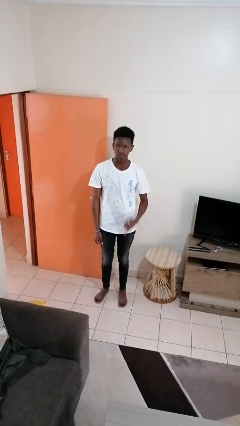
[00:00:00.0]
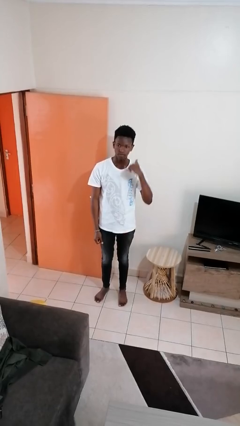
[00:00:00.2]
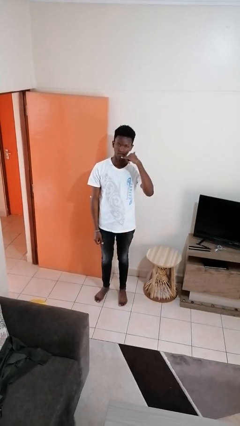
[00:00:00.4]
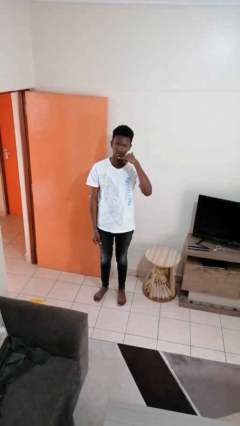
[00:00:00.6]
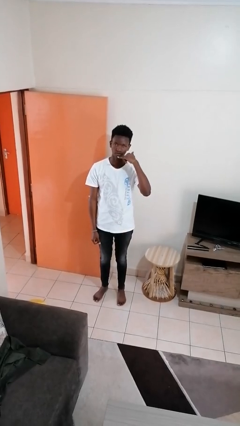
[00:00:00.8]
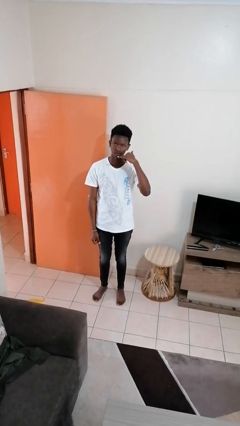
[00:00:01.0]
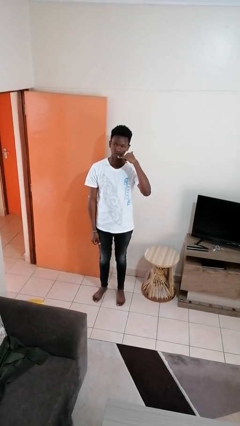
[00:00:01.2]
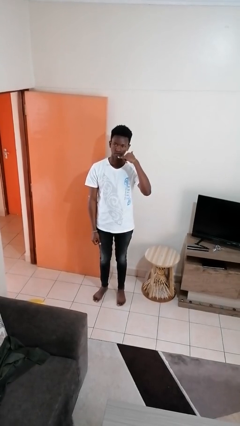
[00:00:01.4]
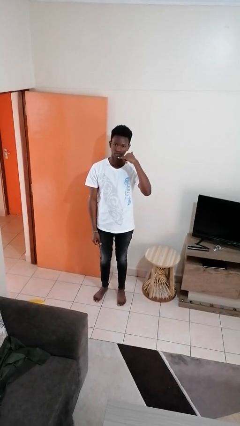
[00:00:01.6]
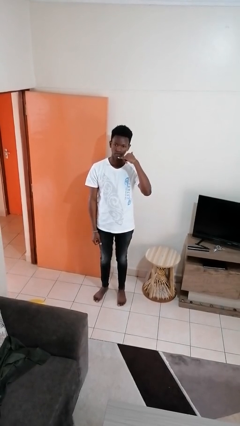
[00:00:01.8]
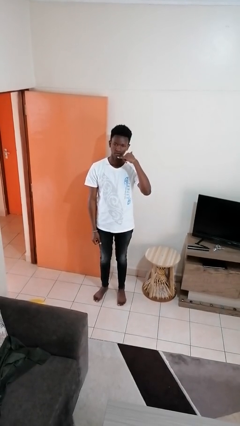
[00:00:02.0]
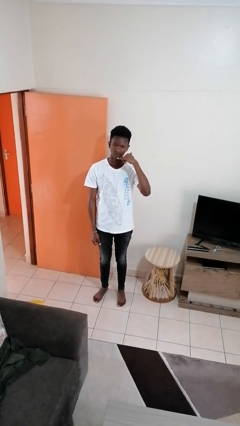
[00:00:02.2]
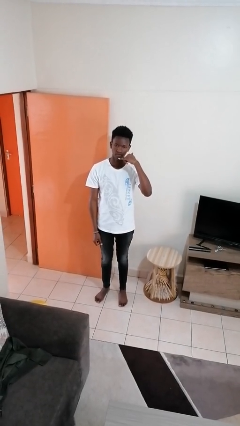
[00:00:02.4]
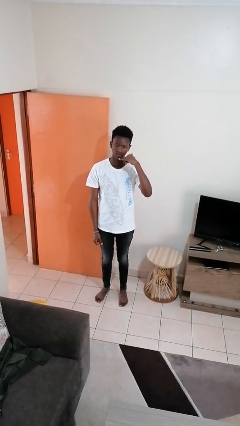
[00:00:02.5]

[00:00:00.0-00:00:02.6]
person gestures call me

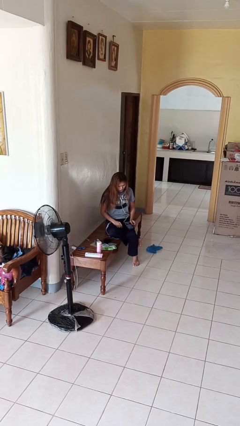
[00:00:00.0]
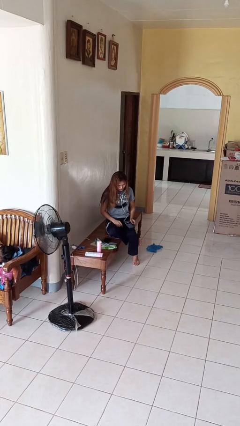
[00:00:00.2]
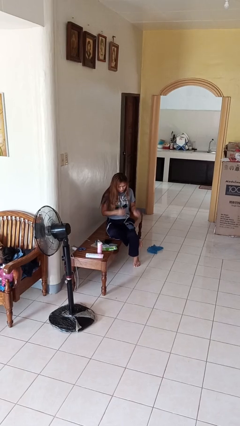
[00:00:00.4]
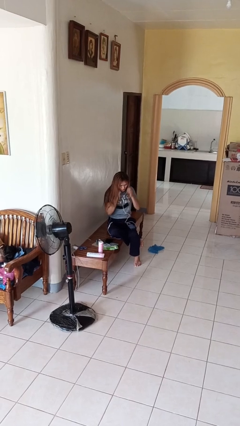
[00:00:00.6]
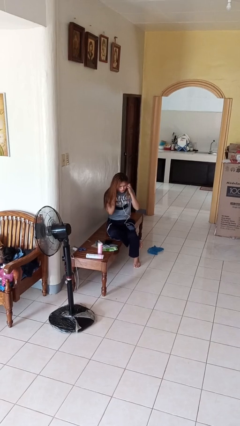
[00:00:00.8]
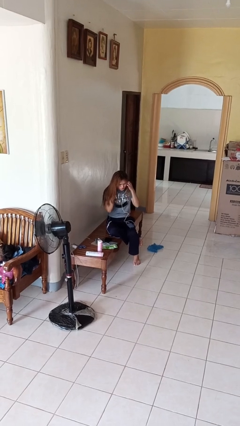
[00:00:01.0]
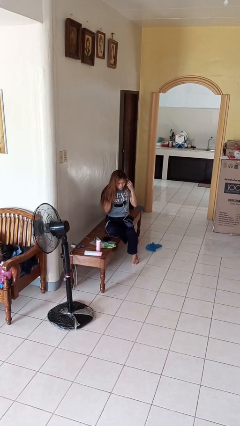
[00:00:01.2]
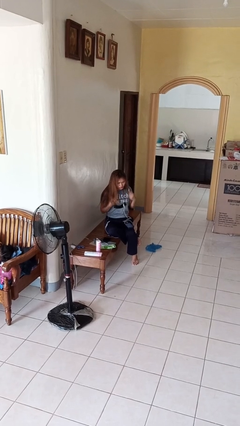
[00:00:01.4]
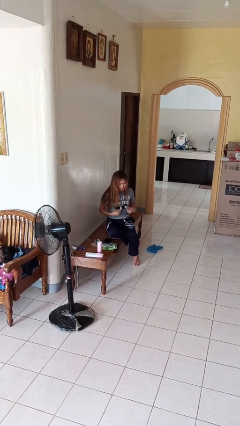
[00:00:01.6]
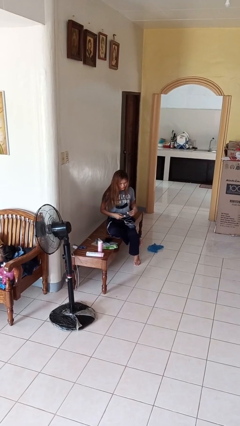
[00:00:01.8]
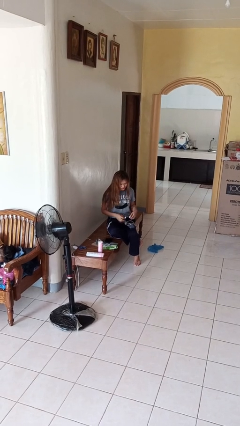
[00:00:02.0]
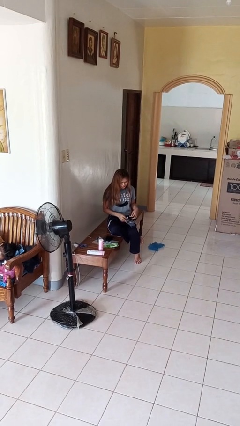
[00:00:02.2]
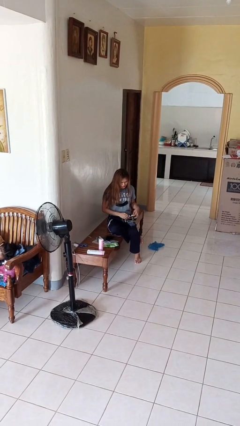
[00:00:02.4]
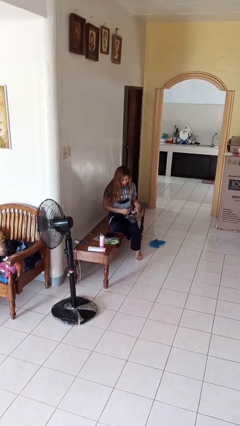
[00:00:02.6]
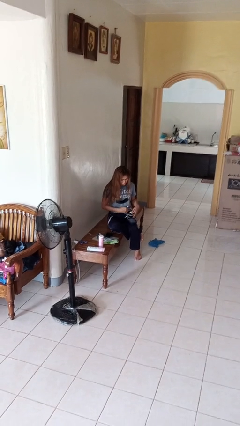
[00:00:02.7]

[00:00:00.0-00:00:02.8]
person takes off headphones

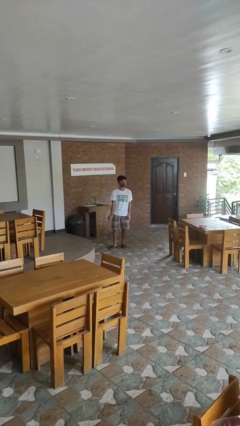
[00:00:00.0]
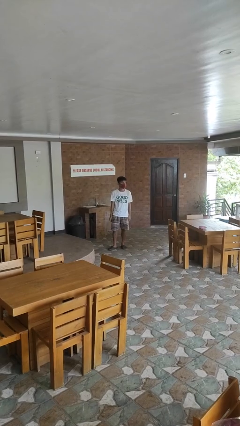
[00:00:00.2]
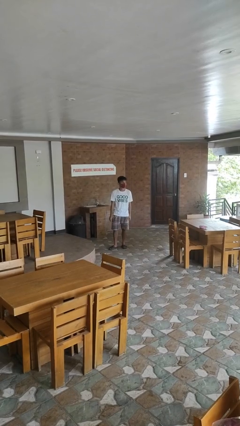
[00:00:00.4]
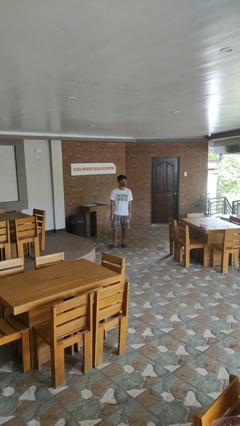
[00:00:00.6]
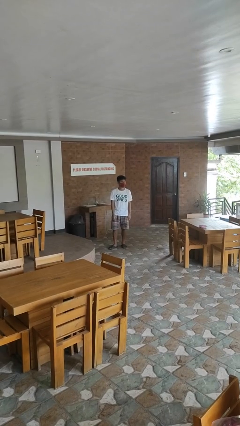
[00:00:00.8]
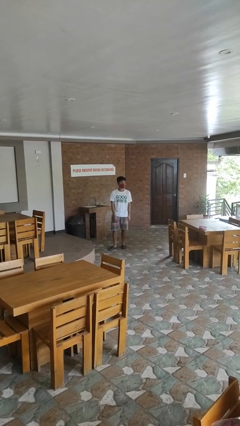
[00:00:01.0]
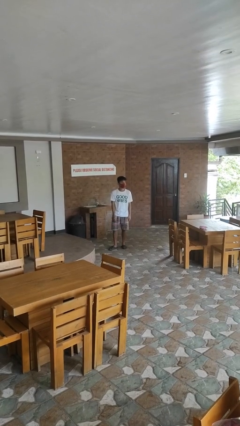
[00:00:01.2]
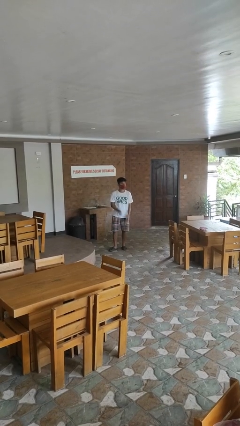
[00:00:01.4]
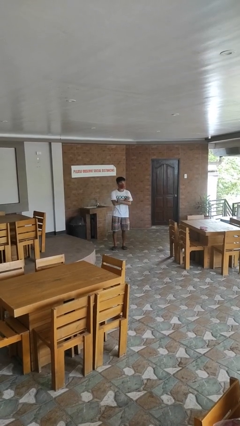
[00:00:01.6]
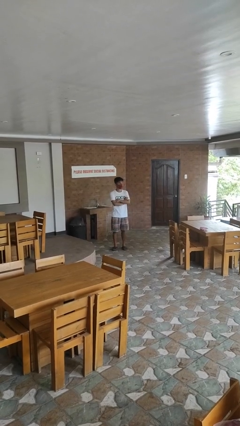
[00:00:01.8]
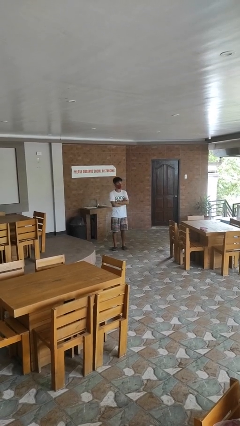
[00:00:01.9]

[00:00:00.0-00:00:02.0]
person brushes teeth

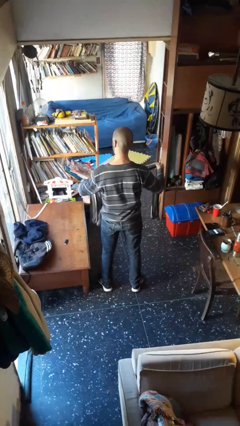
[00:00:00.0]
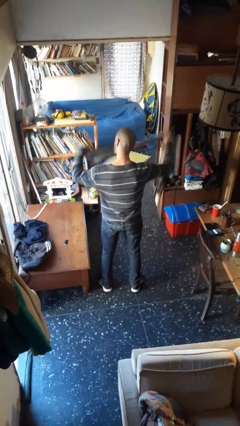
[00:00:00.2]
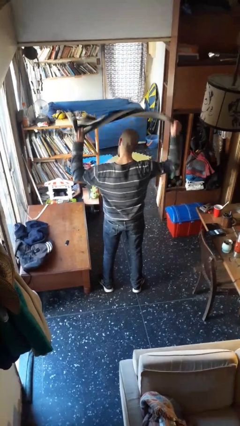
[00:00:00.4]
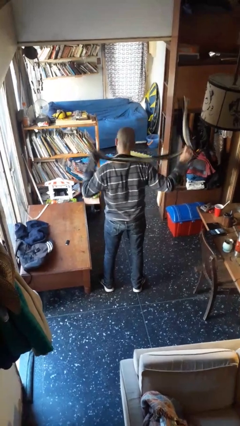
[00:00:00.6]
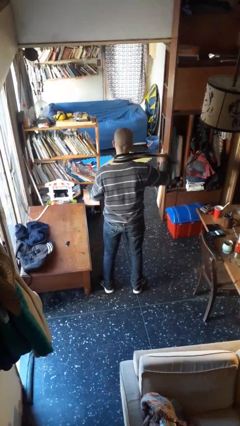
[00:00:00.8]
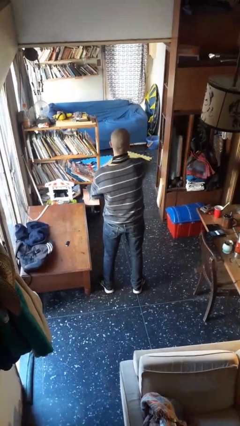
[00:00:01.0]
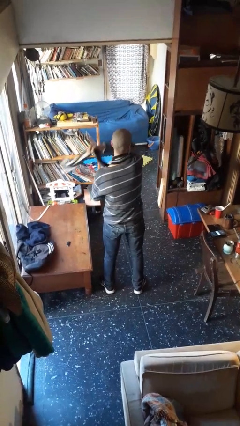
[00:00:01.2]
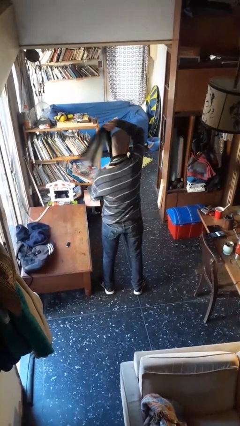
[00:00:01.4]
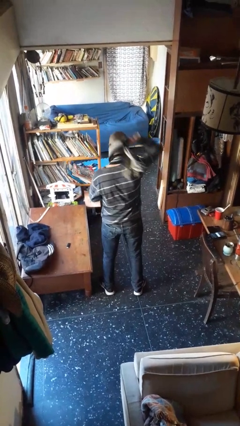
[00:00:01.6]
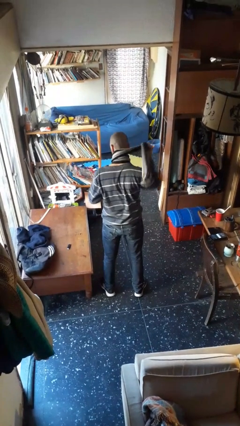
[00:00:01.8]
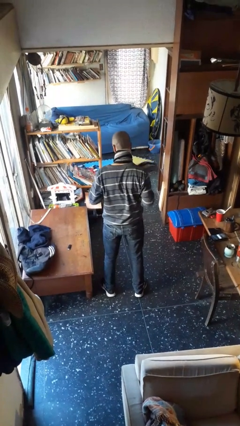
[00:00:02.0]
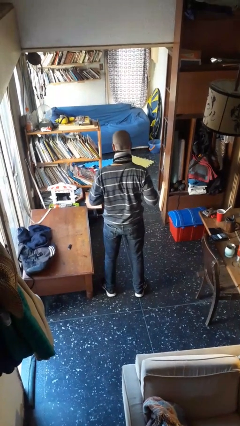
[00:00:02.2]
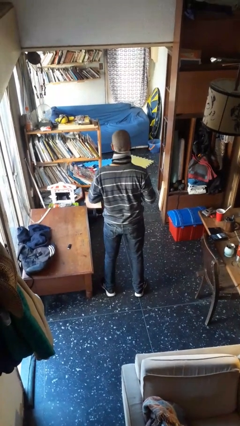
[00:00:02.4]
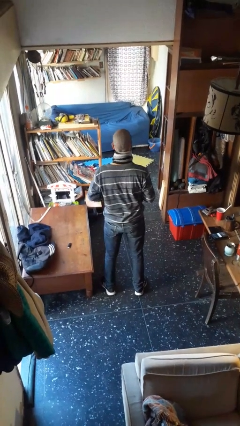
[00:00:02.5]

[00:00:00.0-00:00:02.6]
person puts on scarf

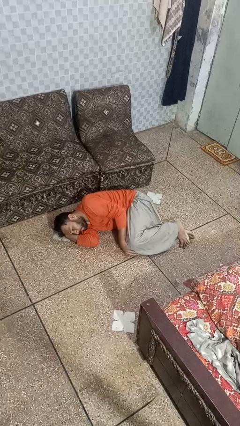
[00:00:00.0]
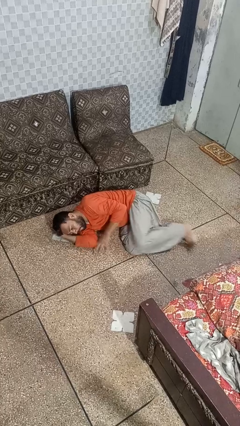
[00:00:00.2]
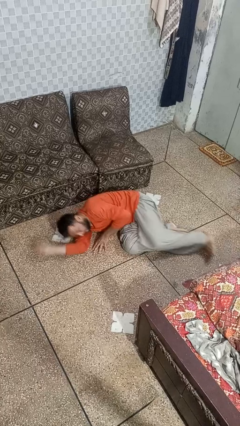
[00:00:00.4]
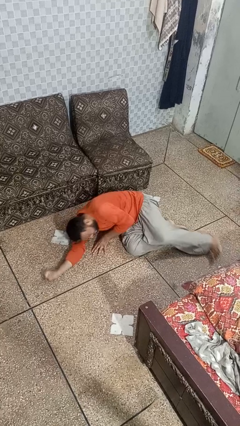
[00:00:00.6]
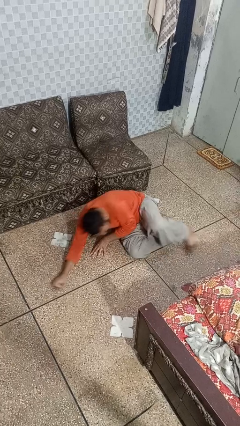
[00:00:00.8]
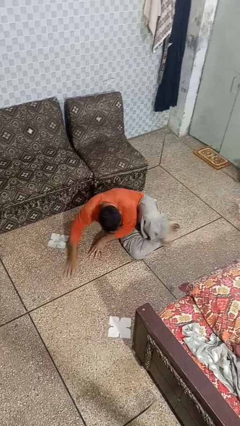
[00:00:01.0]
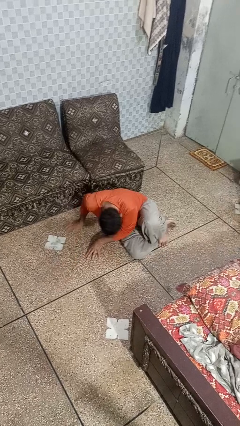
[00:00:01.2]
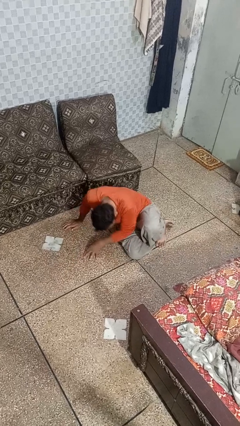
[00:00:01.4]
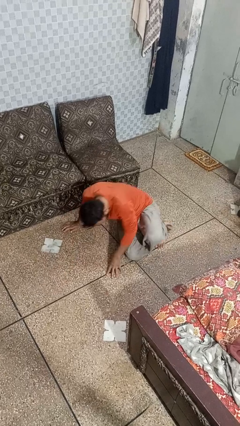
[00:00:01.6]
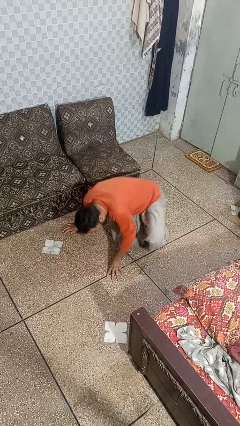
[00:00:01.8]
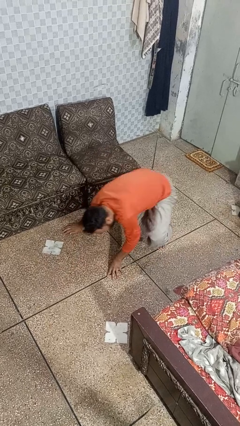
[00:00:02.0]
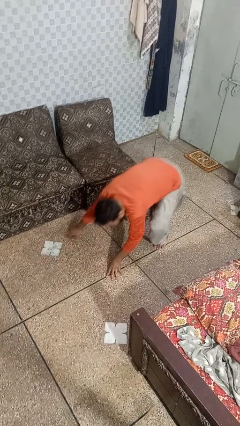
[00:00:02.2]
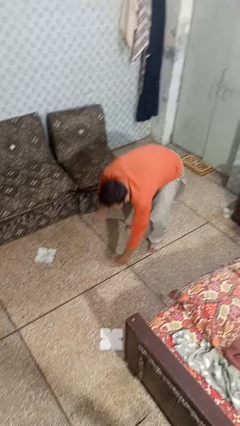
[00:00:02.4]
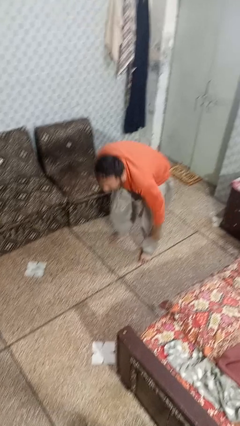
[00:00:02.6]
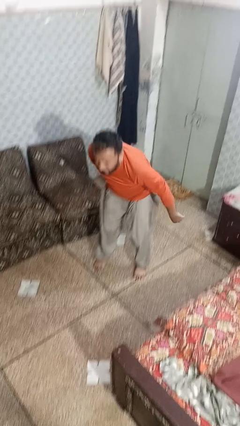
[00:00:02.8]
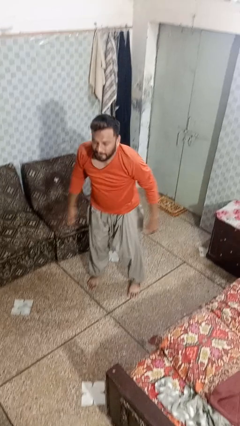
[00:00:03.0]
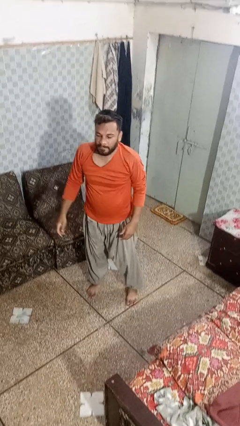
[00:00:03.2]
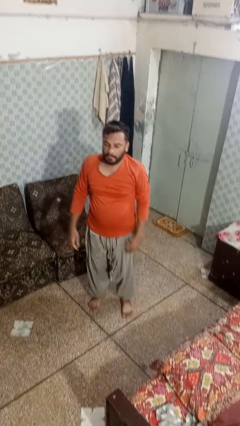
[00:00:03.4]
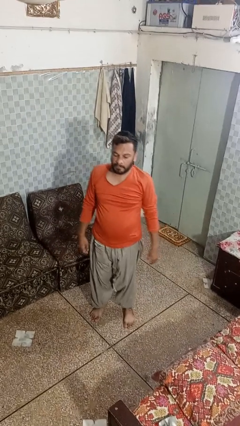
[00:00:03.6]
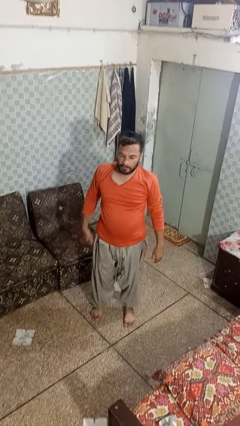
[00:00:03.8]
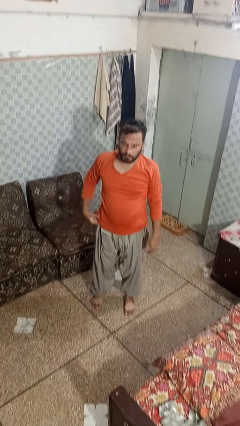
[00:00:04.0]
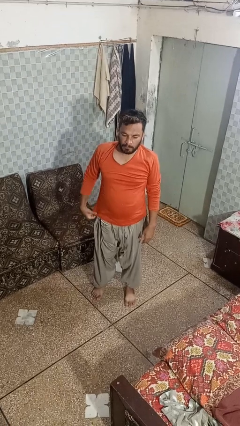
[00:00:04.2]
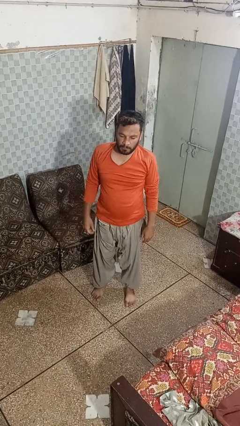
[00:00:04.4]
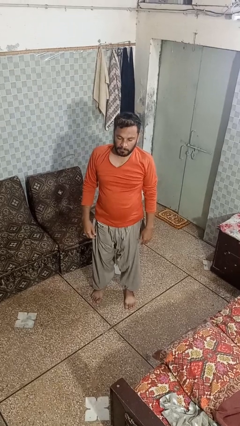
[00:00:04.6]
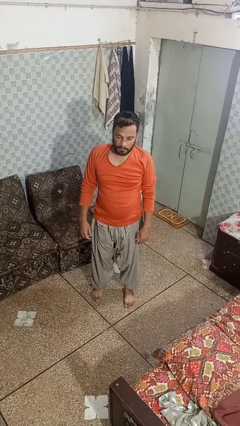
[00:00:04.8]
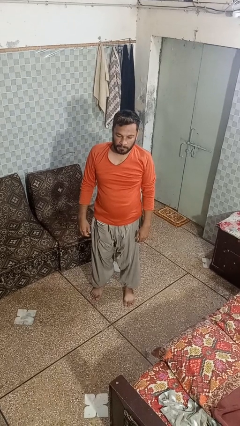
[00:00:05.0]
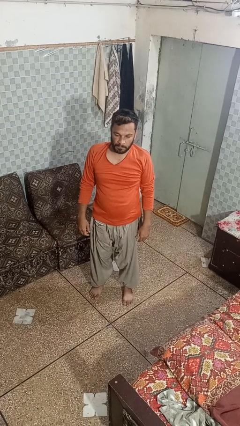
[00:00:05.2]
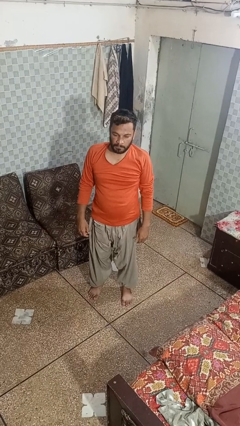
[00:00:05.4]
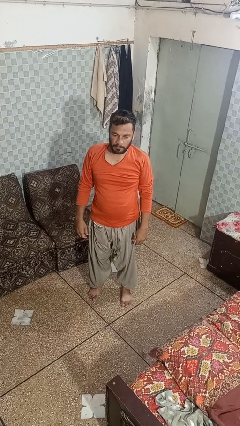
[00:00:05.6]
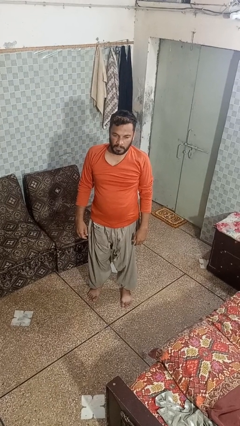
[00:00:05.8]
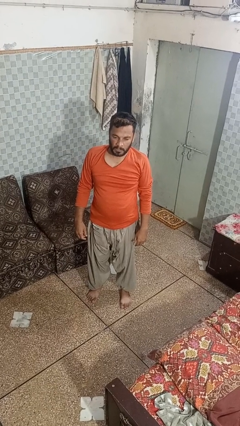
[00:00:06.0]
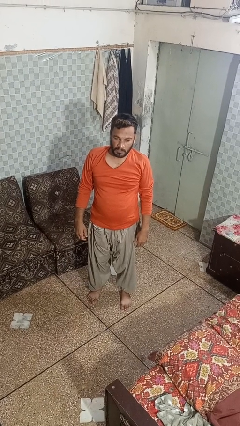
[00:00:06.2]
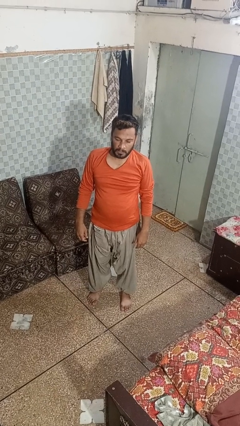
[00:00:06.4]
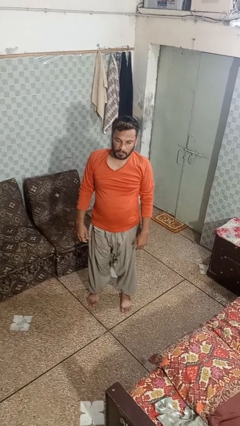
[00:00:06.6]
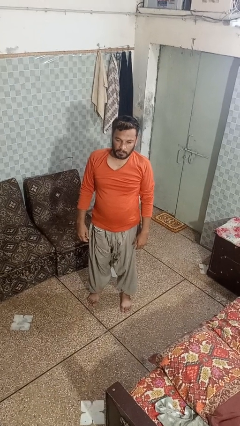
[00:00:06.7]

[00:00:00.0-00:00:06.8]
person stands up from floor

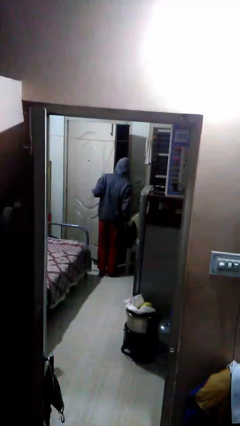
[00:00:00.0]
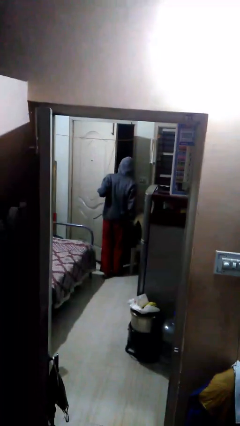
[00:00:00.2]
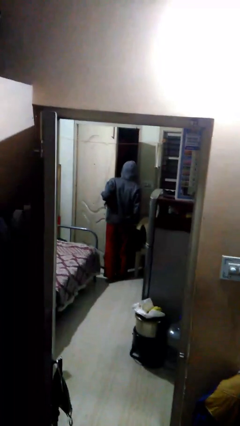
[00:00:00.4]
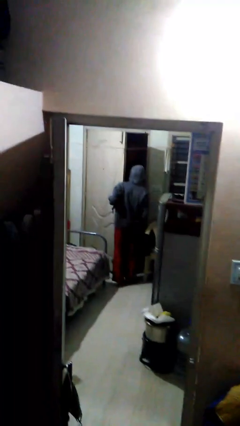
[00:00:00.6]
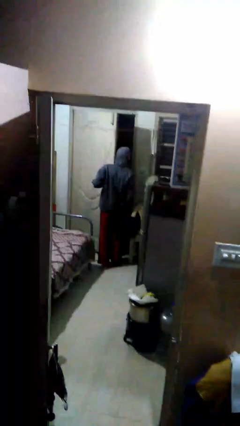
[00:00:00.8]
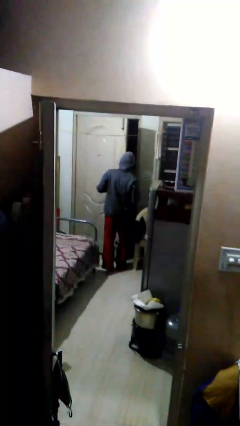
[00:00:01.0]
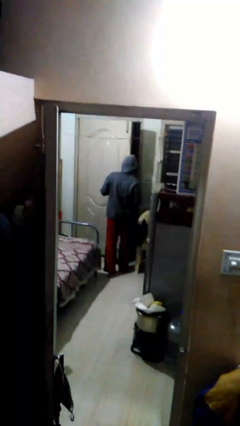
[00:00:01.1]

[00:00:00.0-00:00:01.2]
person opens facility door
